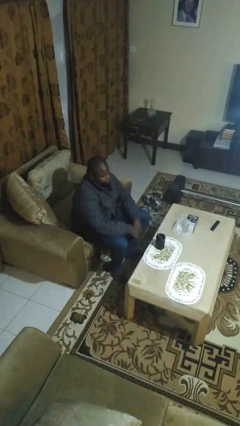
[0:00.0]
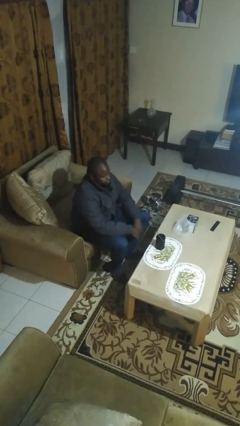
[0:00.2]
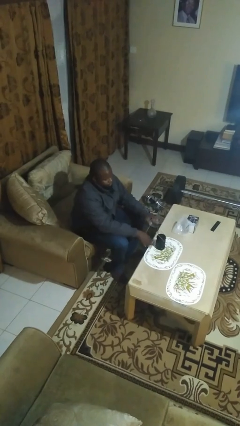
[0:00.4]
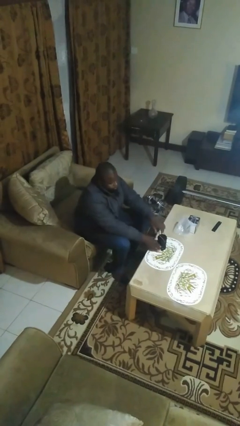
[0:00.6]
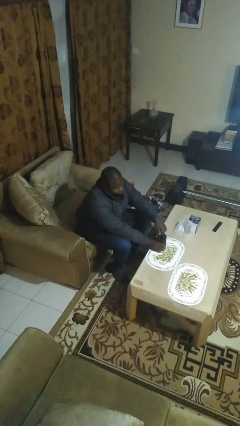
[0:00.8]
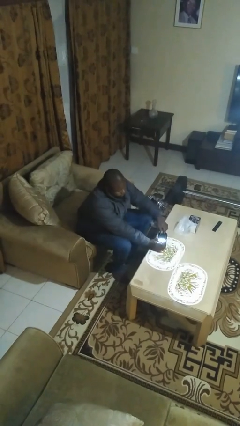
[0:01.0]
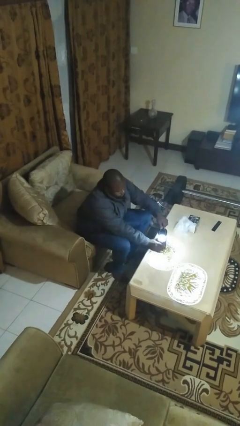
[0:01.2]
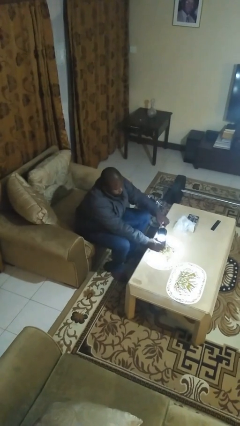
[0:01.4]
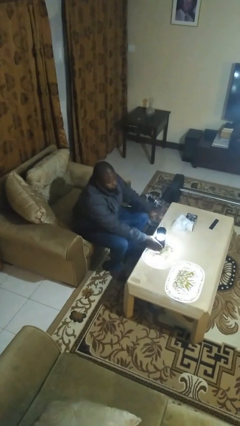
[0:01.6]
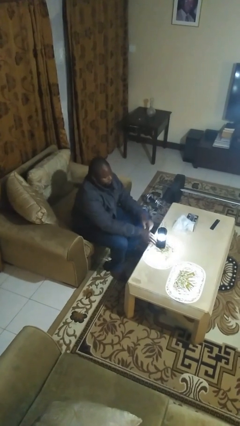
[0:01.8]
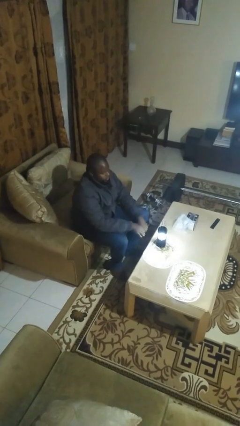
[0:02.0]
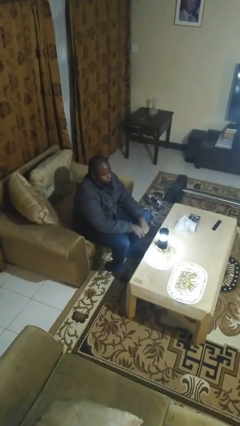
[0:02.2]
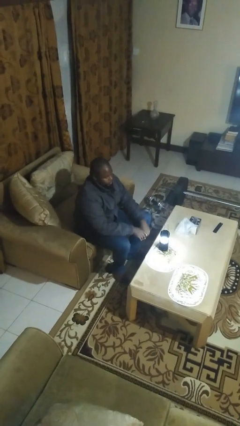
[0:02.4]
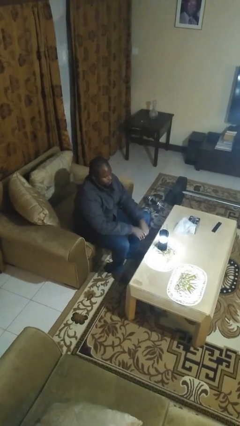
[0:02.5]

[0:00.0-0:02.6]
person turns on lamp

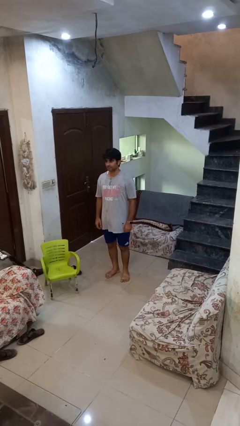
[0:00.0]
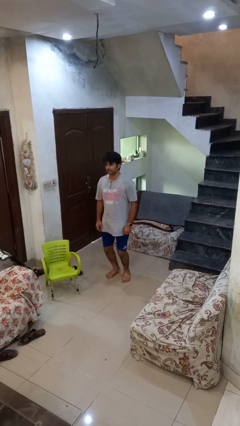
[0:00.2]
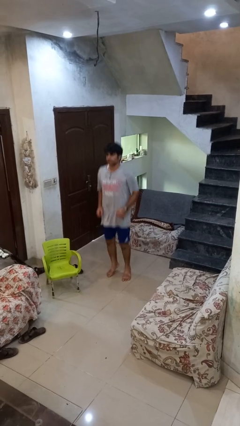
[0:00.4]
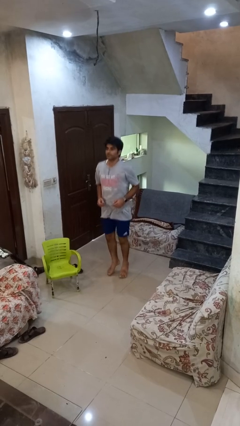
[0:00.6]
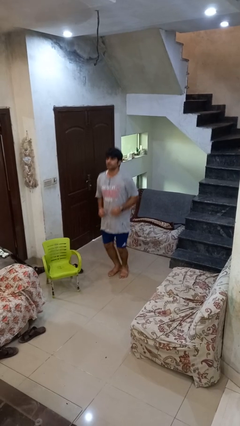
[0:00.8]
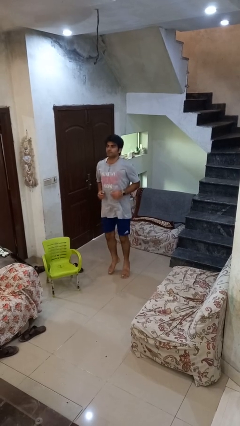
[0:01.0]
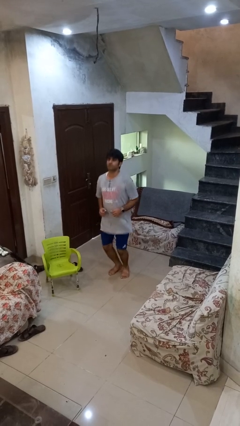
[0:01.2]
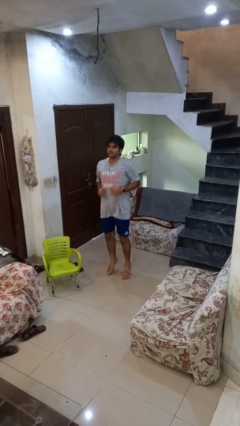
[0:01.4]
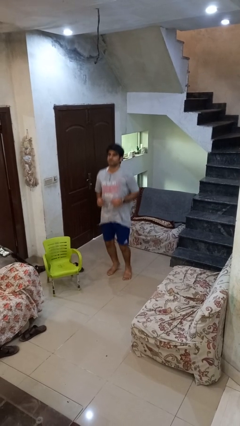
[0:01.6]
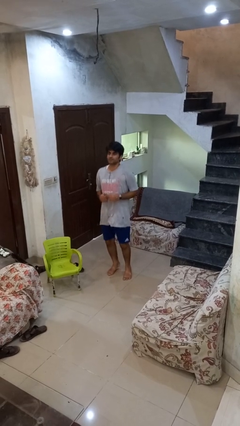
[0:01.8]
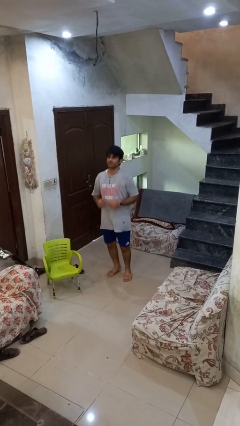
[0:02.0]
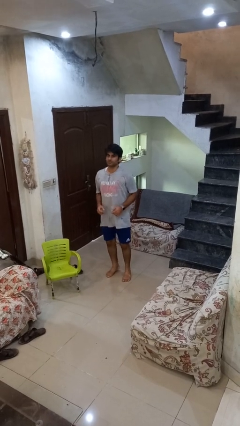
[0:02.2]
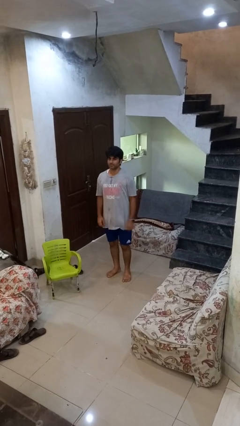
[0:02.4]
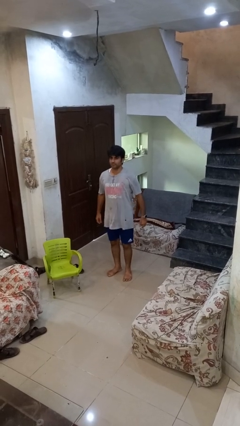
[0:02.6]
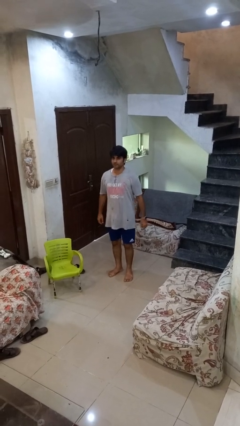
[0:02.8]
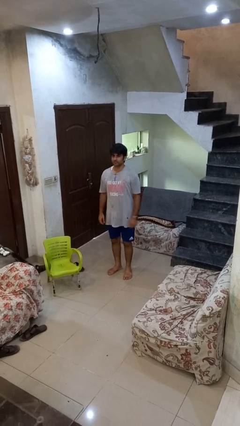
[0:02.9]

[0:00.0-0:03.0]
person jumps

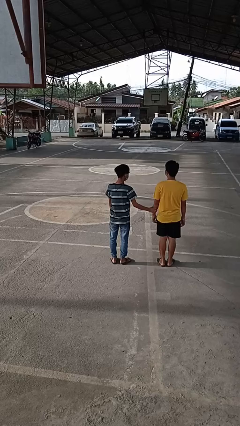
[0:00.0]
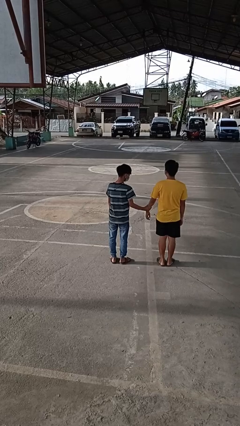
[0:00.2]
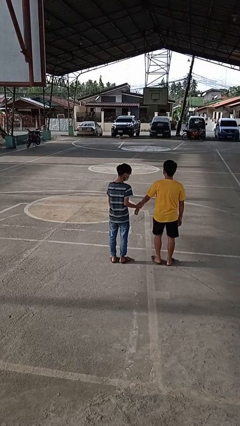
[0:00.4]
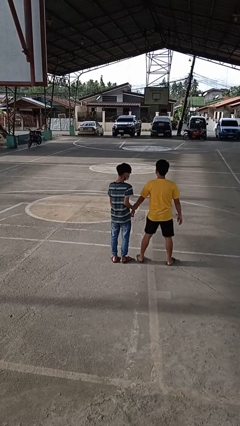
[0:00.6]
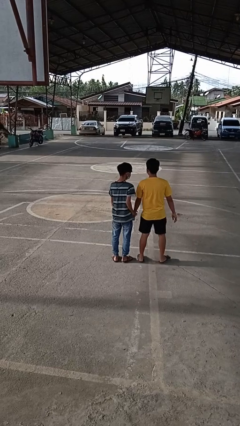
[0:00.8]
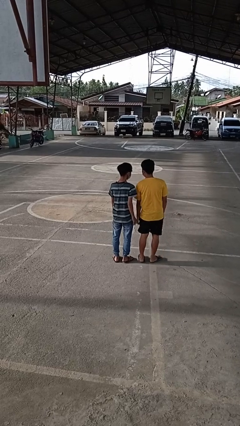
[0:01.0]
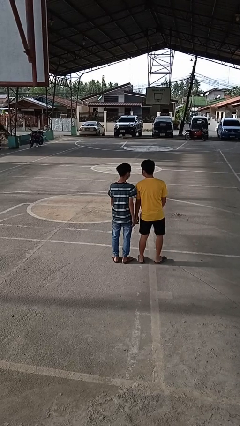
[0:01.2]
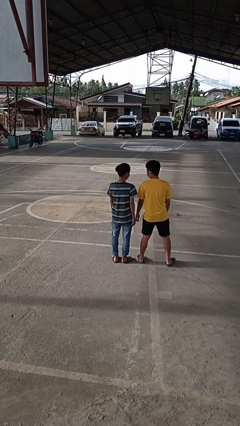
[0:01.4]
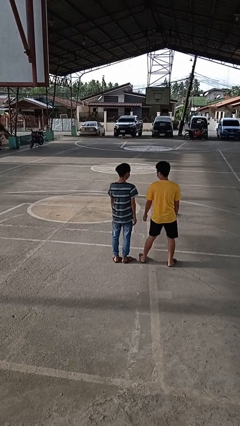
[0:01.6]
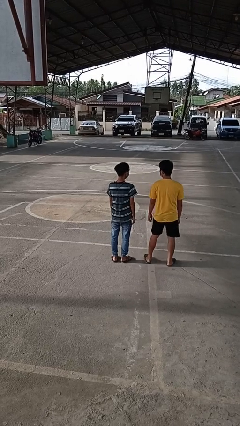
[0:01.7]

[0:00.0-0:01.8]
person grabs person by forearm

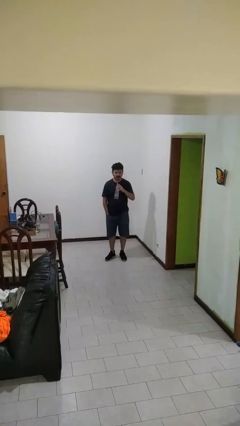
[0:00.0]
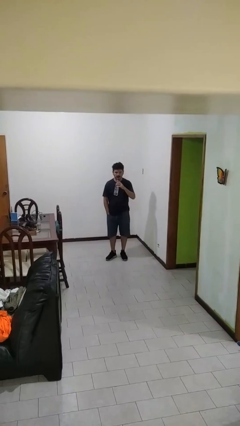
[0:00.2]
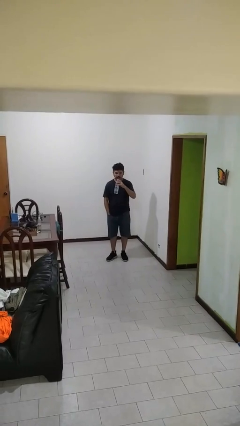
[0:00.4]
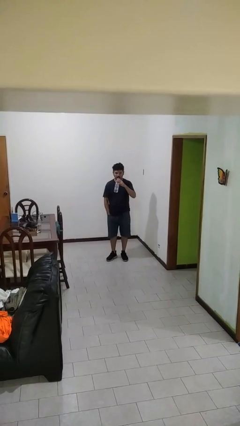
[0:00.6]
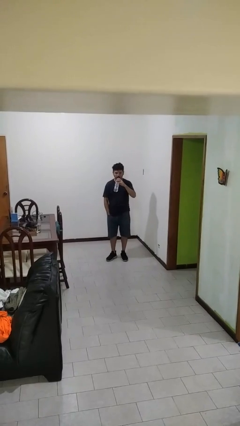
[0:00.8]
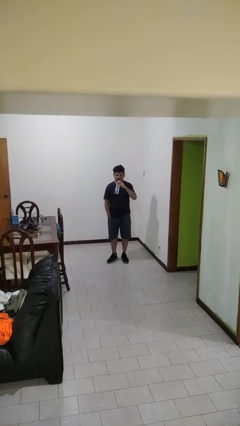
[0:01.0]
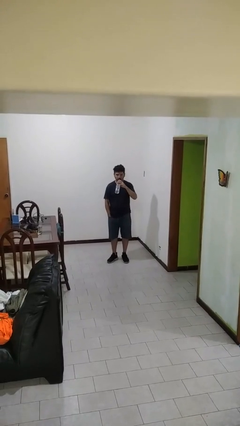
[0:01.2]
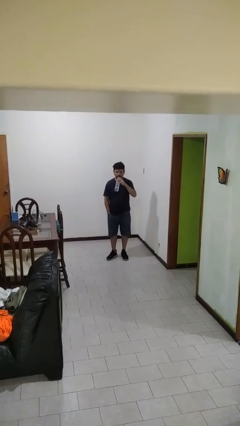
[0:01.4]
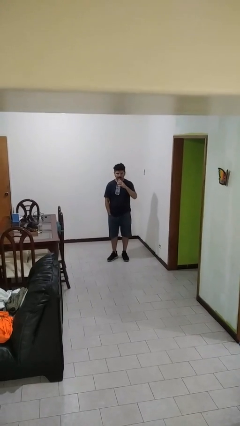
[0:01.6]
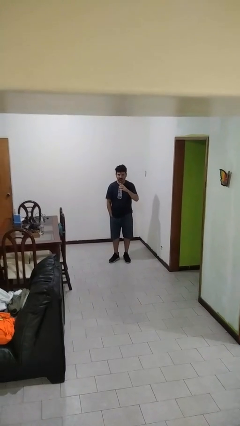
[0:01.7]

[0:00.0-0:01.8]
person drinks from straw

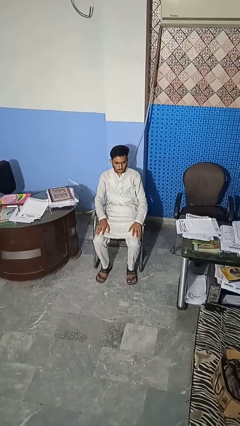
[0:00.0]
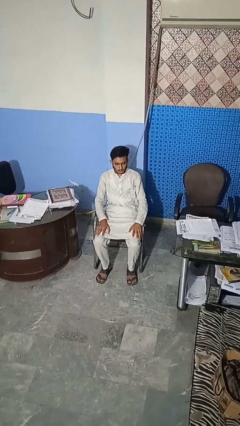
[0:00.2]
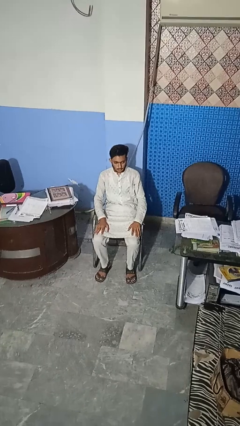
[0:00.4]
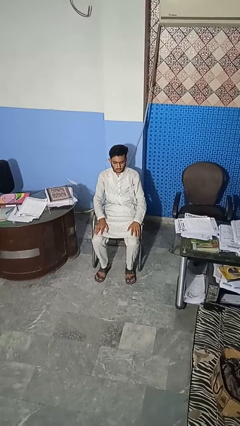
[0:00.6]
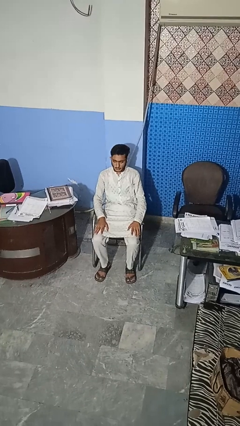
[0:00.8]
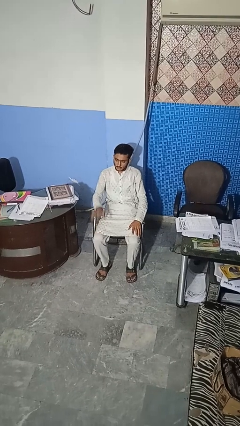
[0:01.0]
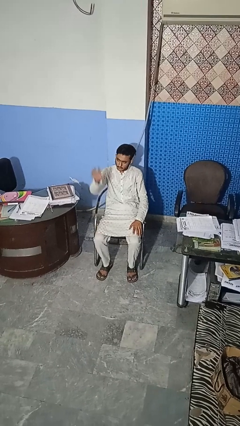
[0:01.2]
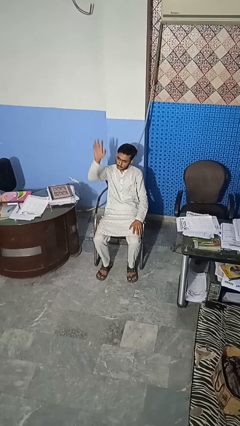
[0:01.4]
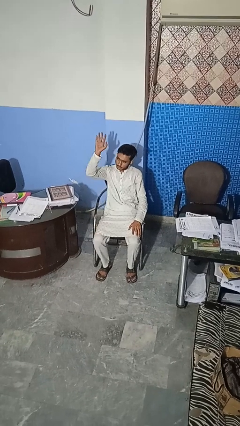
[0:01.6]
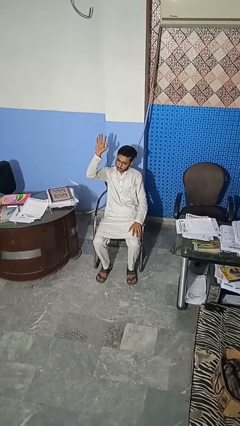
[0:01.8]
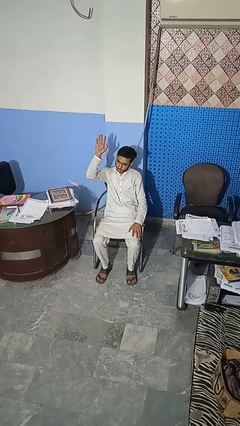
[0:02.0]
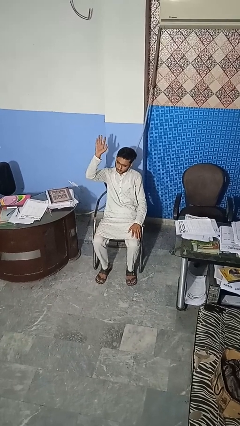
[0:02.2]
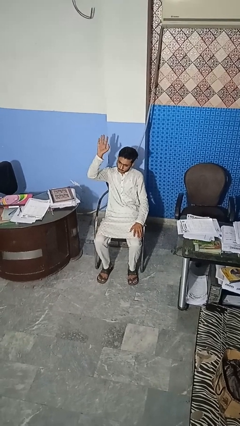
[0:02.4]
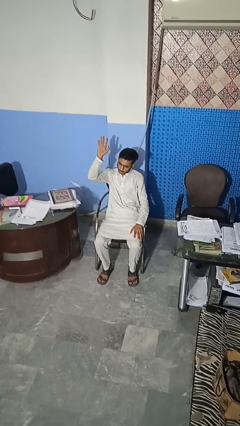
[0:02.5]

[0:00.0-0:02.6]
person gestures raise hand

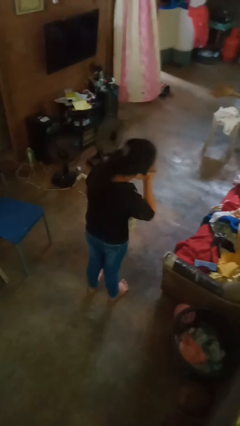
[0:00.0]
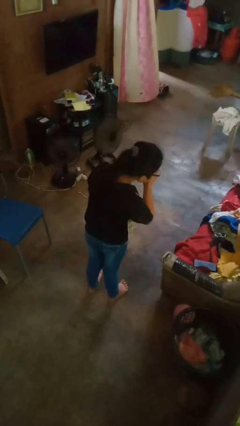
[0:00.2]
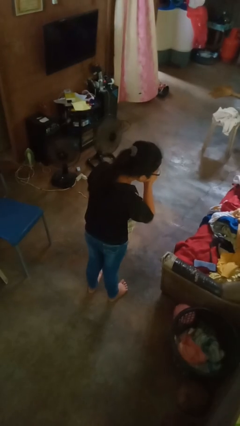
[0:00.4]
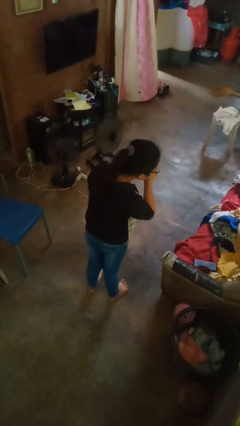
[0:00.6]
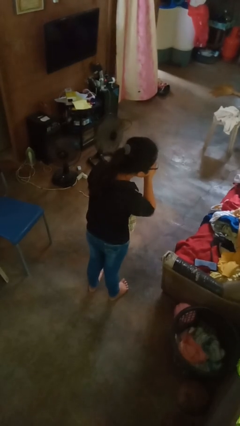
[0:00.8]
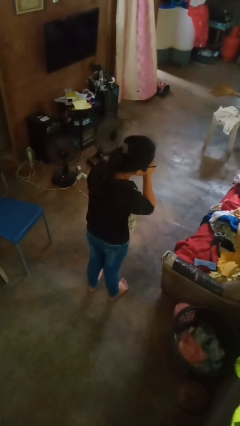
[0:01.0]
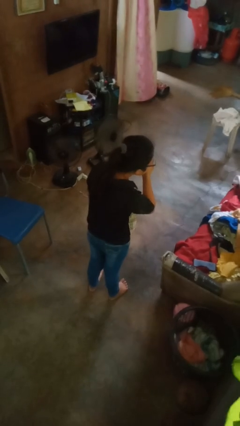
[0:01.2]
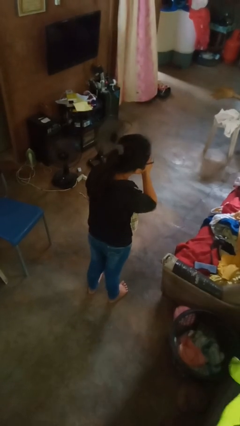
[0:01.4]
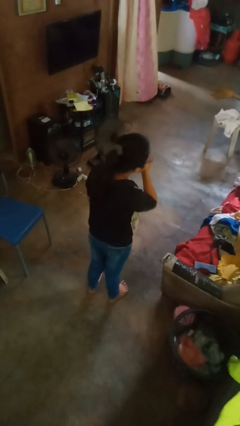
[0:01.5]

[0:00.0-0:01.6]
person sneezes into hand

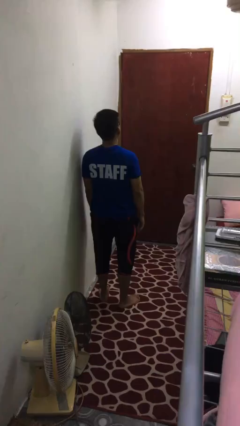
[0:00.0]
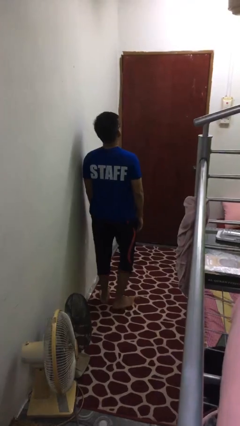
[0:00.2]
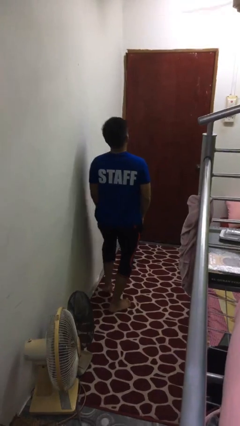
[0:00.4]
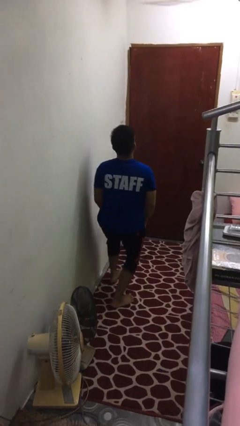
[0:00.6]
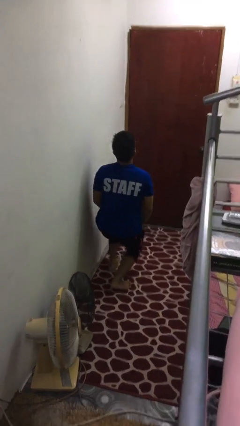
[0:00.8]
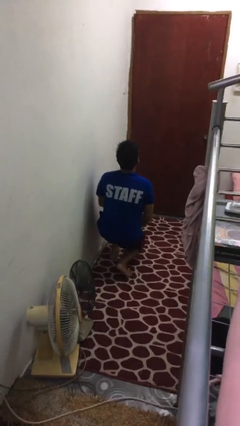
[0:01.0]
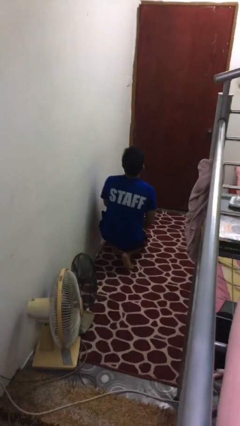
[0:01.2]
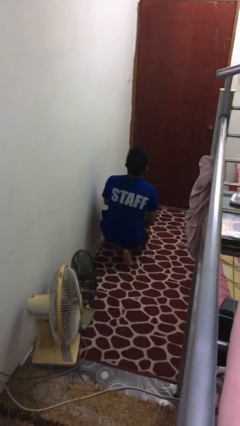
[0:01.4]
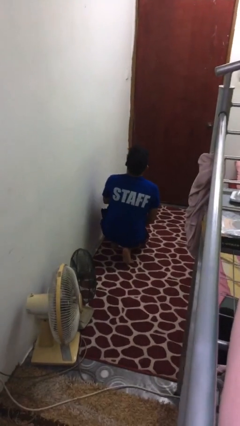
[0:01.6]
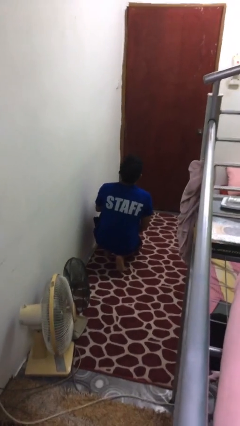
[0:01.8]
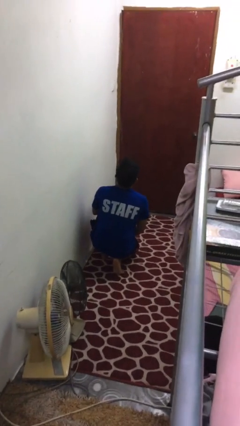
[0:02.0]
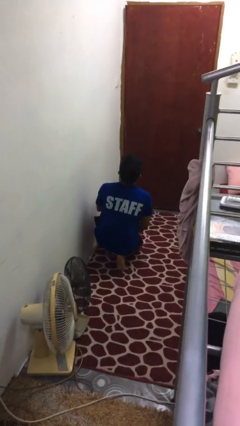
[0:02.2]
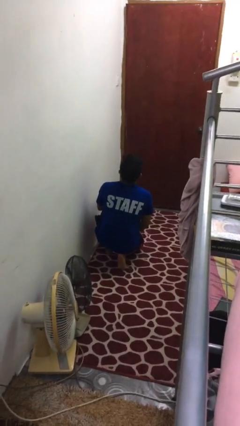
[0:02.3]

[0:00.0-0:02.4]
person kneels

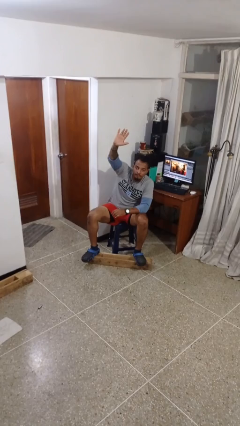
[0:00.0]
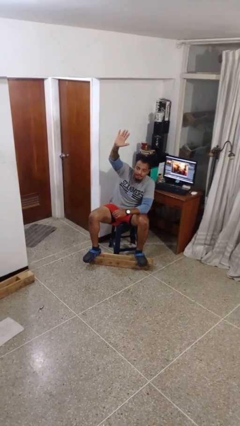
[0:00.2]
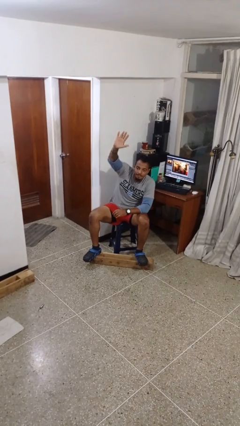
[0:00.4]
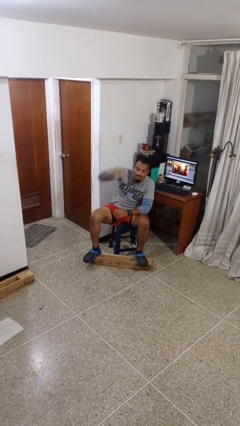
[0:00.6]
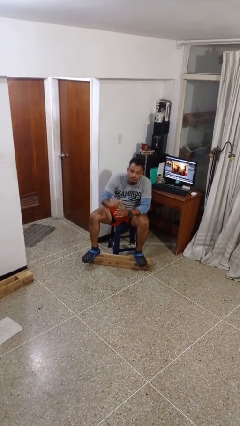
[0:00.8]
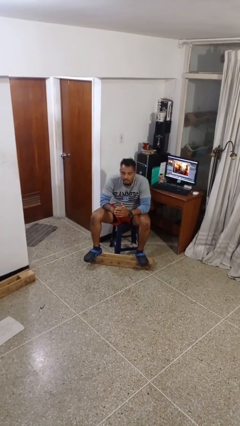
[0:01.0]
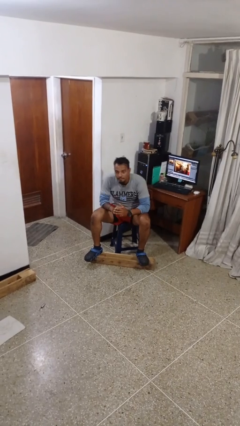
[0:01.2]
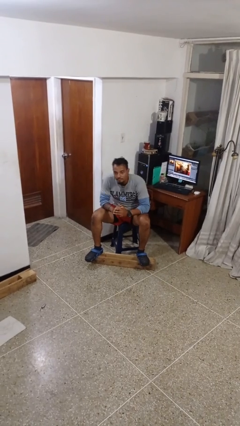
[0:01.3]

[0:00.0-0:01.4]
person gestures lower hand
